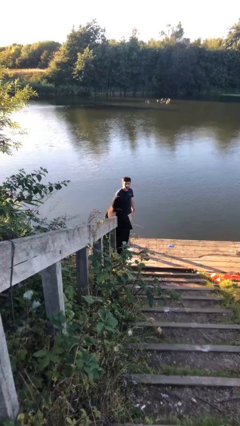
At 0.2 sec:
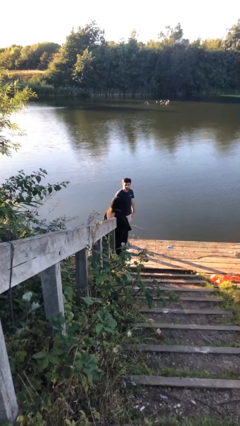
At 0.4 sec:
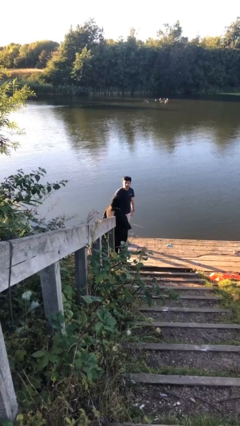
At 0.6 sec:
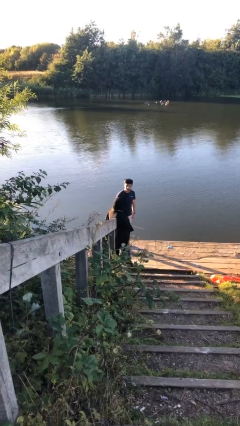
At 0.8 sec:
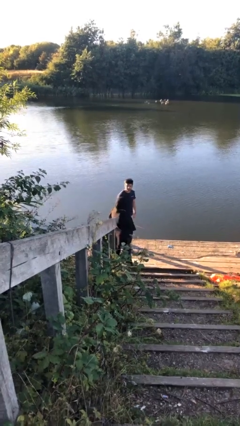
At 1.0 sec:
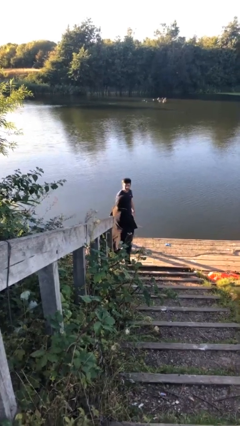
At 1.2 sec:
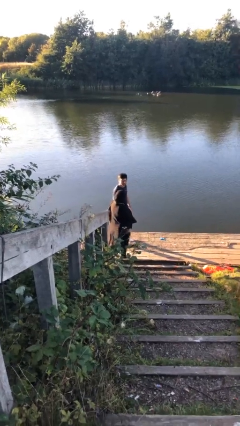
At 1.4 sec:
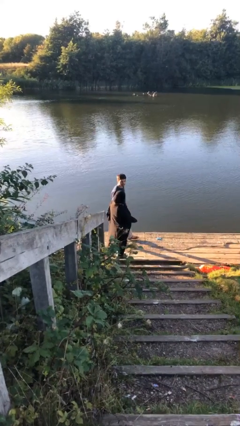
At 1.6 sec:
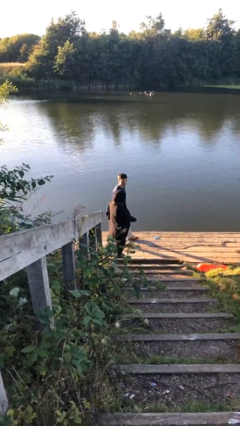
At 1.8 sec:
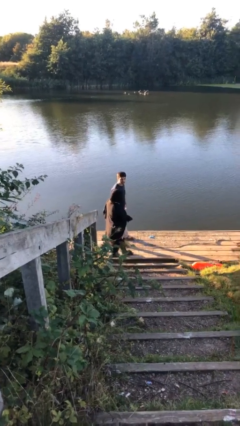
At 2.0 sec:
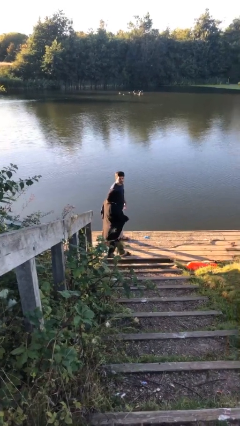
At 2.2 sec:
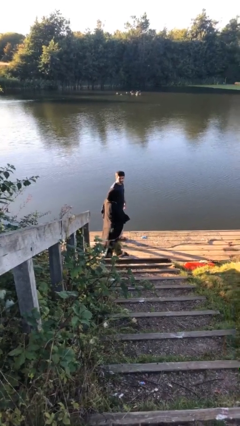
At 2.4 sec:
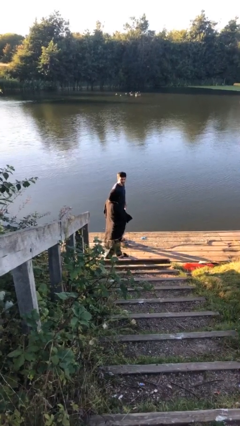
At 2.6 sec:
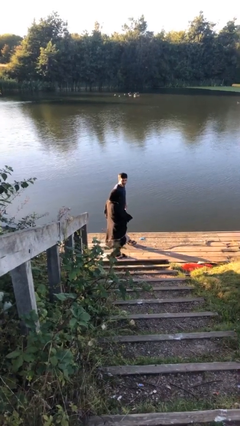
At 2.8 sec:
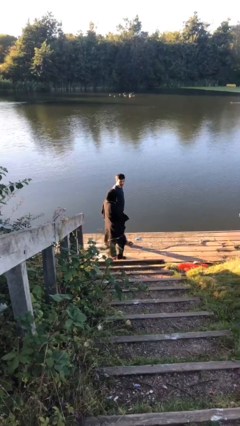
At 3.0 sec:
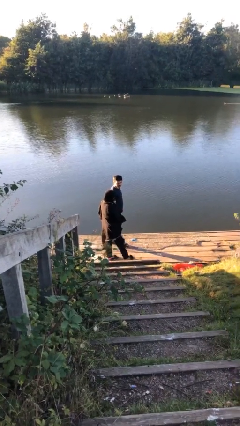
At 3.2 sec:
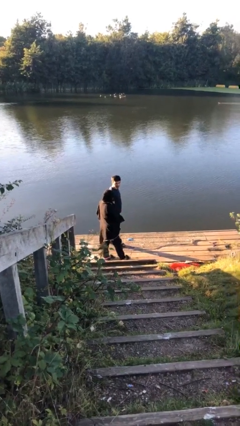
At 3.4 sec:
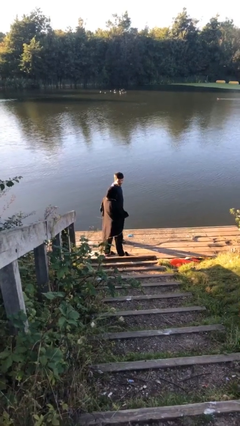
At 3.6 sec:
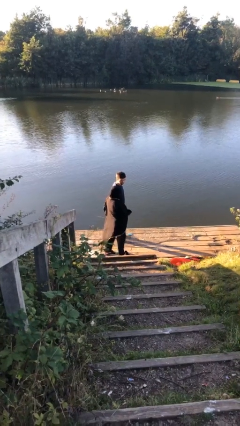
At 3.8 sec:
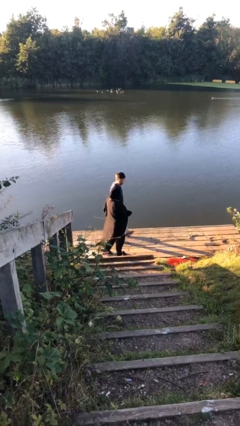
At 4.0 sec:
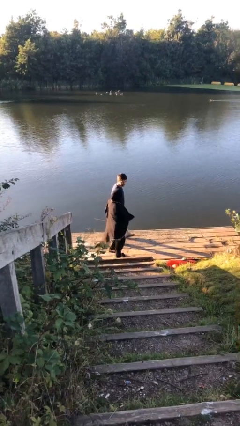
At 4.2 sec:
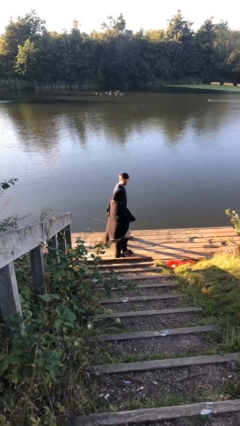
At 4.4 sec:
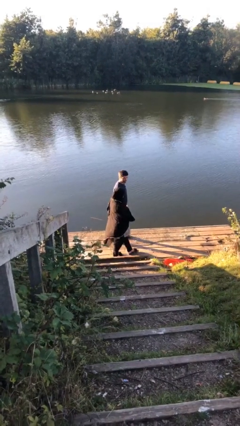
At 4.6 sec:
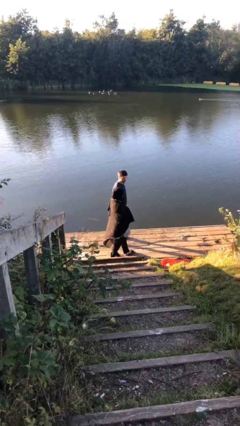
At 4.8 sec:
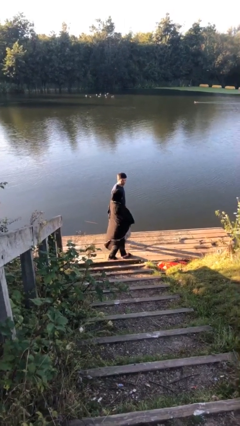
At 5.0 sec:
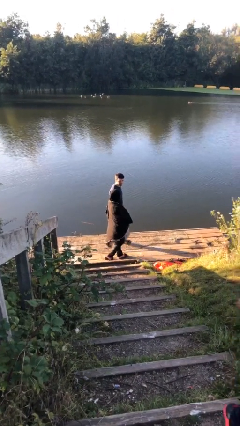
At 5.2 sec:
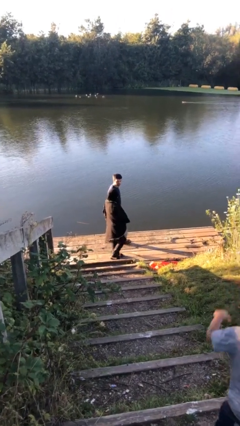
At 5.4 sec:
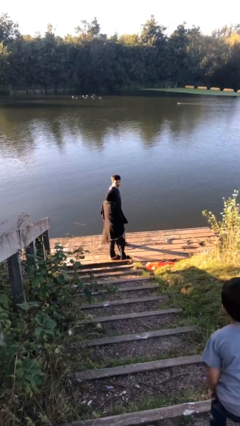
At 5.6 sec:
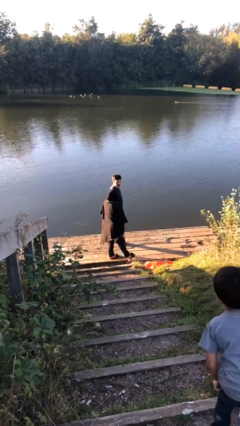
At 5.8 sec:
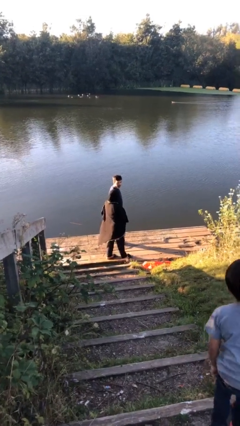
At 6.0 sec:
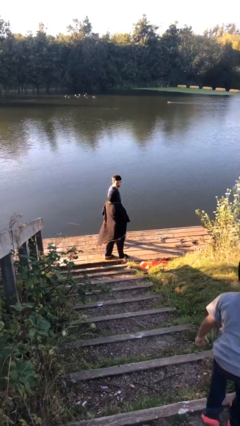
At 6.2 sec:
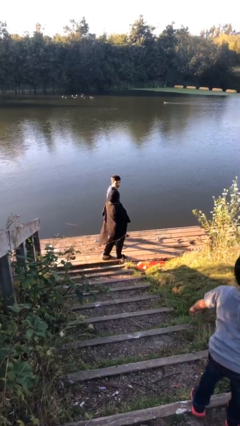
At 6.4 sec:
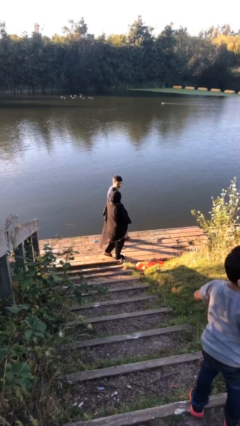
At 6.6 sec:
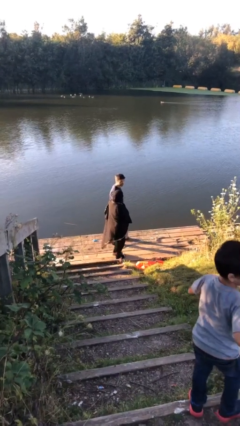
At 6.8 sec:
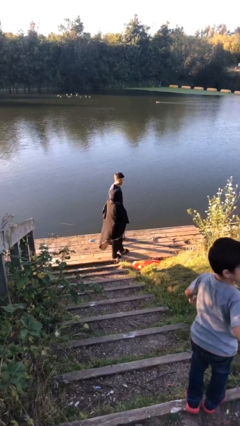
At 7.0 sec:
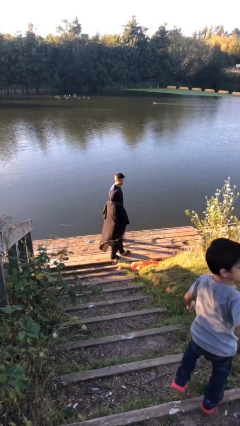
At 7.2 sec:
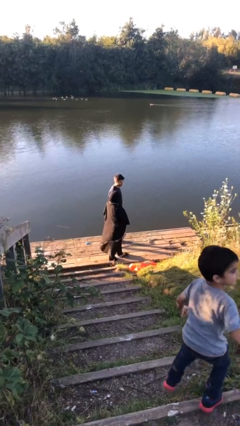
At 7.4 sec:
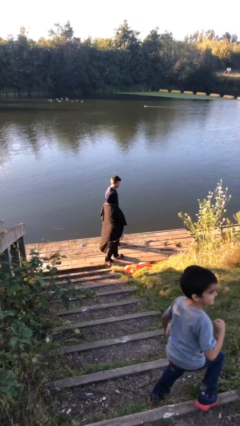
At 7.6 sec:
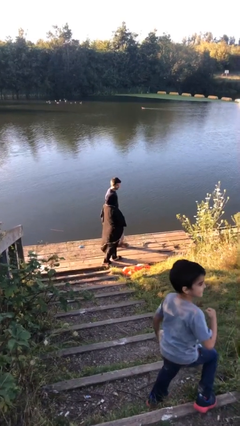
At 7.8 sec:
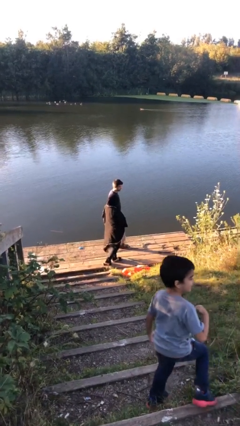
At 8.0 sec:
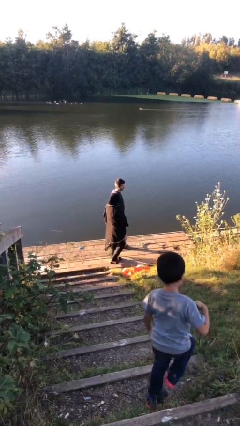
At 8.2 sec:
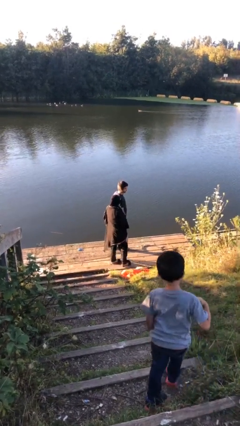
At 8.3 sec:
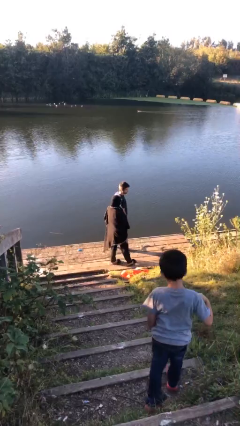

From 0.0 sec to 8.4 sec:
person talks to person

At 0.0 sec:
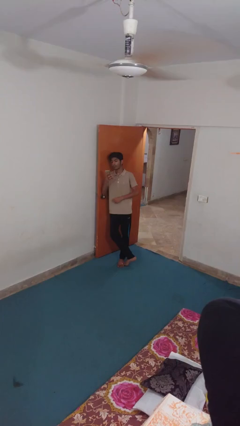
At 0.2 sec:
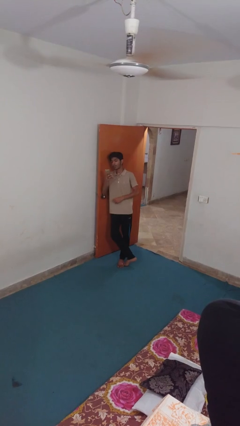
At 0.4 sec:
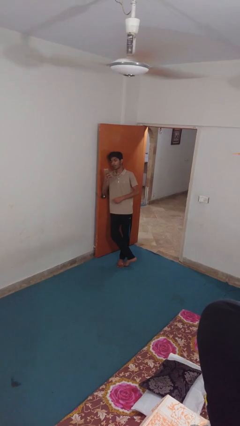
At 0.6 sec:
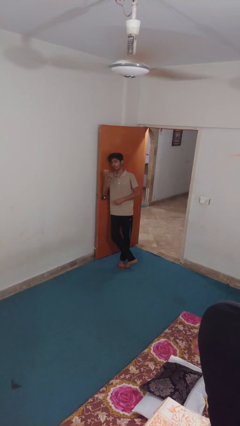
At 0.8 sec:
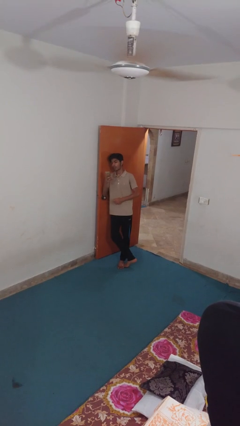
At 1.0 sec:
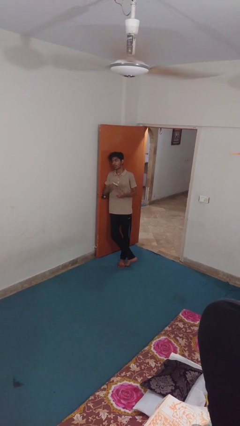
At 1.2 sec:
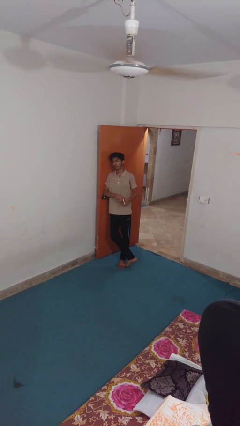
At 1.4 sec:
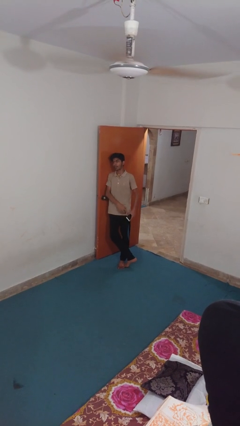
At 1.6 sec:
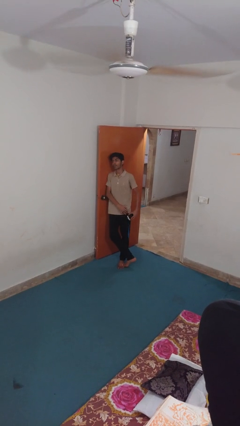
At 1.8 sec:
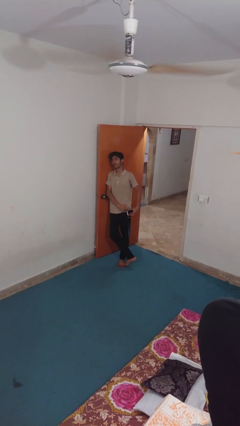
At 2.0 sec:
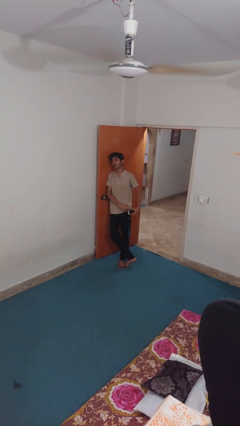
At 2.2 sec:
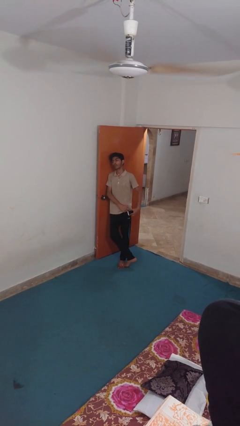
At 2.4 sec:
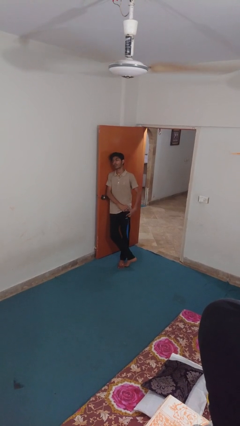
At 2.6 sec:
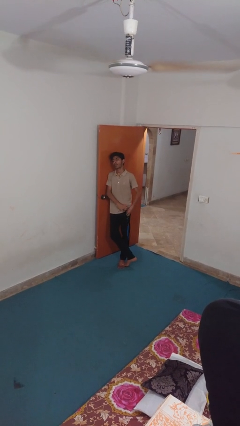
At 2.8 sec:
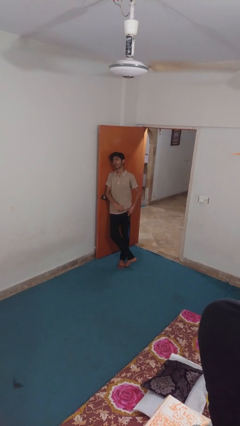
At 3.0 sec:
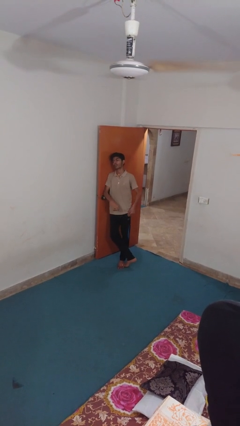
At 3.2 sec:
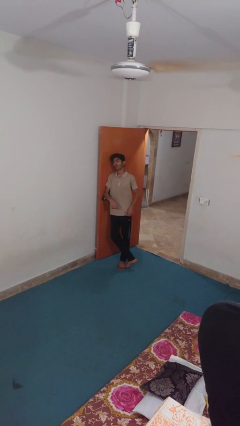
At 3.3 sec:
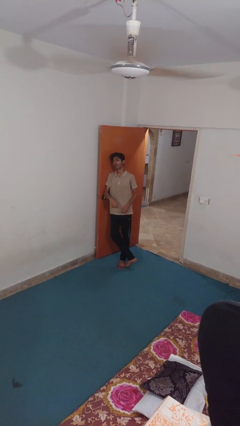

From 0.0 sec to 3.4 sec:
person puts phone into pocket

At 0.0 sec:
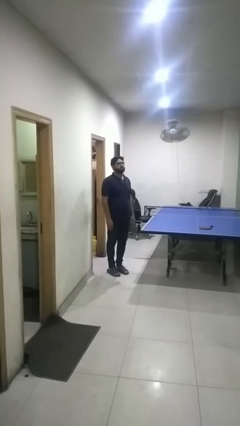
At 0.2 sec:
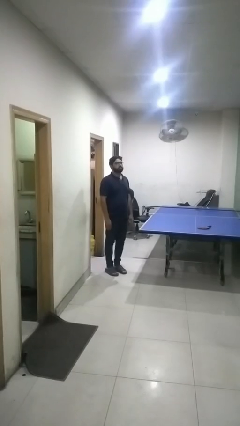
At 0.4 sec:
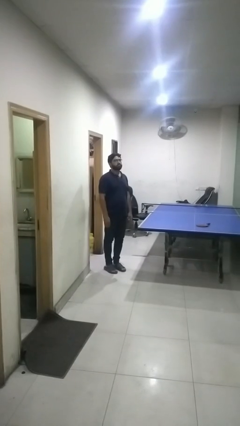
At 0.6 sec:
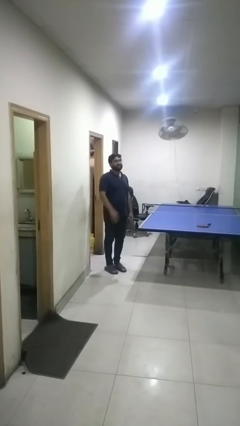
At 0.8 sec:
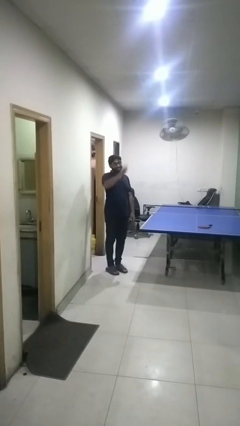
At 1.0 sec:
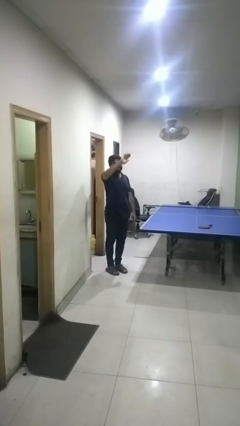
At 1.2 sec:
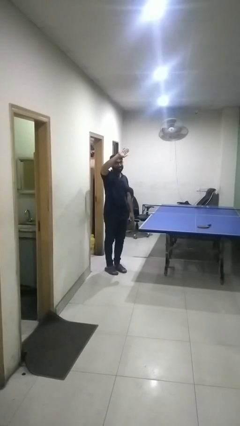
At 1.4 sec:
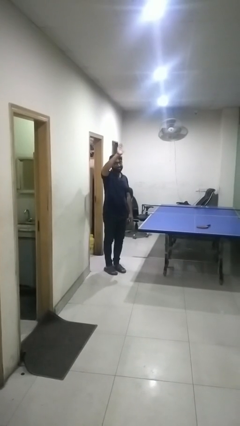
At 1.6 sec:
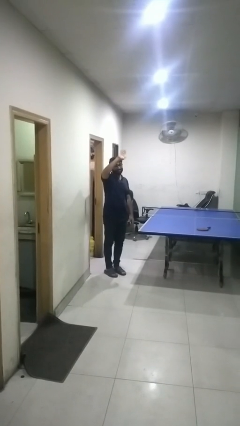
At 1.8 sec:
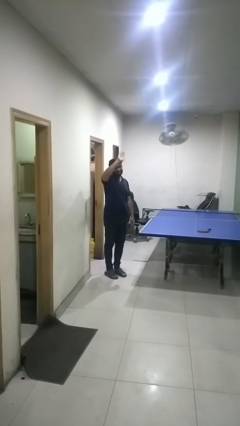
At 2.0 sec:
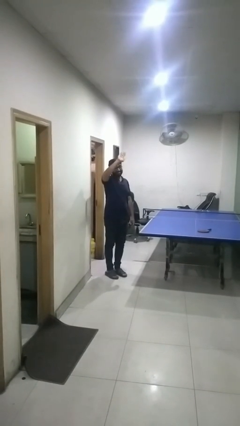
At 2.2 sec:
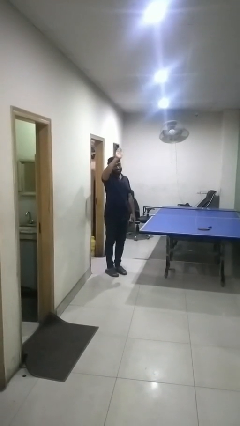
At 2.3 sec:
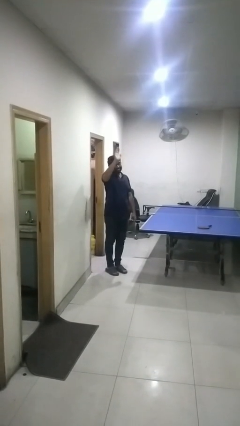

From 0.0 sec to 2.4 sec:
person waves at person

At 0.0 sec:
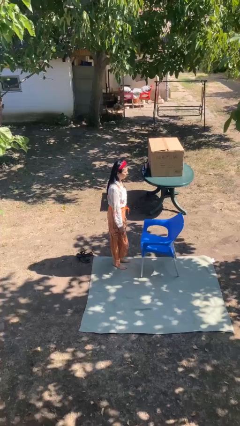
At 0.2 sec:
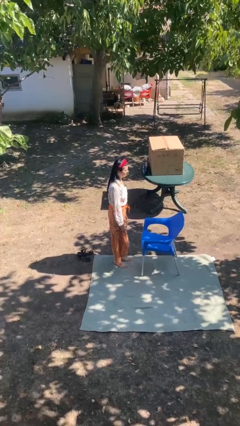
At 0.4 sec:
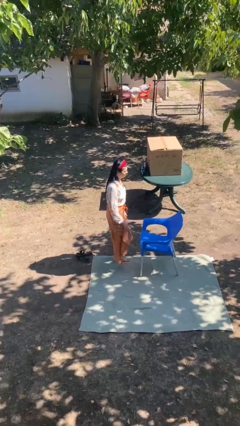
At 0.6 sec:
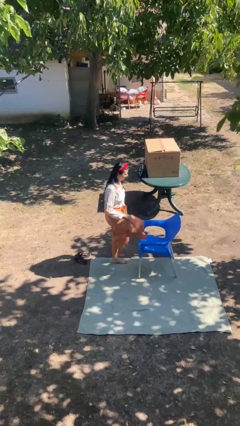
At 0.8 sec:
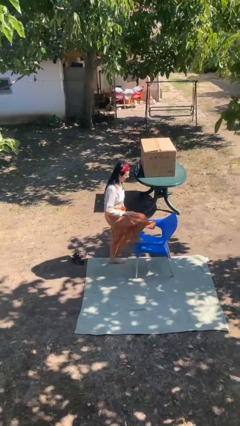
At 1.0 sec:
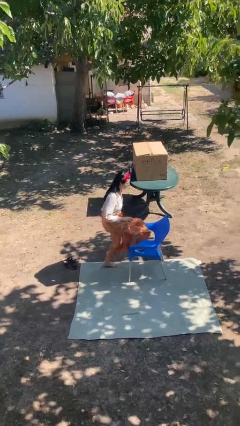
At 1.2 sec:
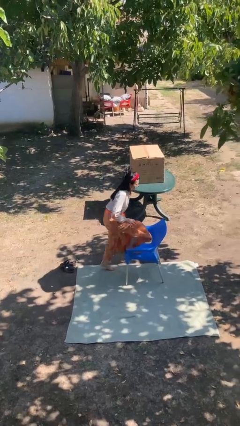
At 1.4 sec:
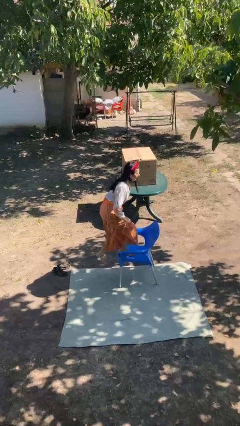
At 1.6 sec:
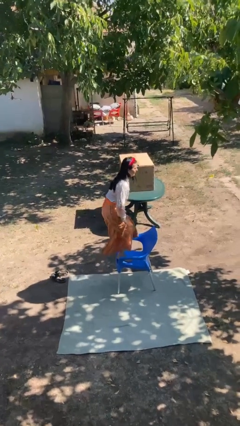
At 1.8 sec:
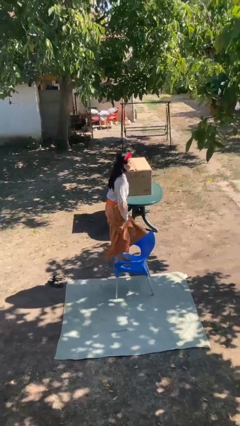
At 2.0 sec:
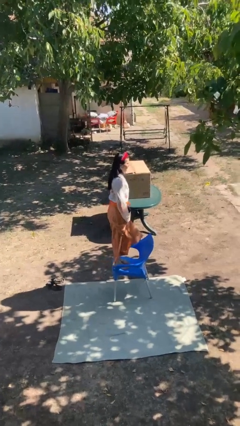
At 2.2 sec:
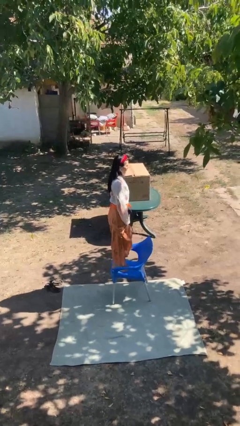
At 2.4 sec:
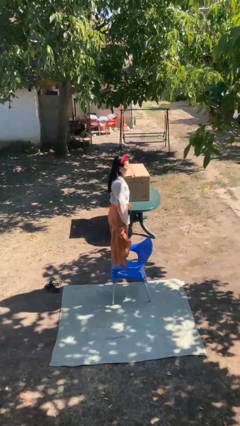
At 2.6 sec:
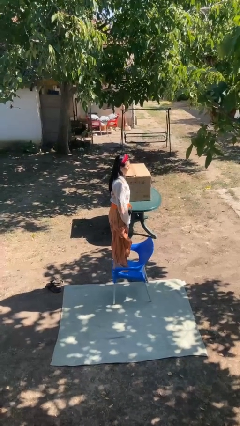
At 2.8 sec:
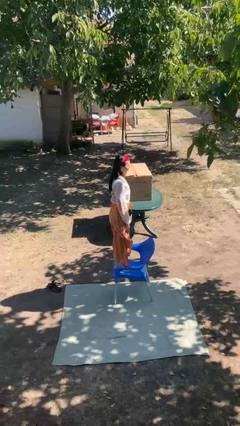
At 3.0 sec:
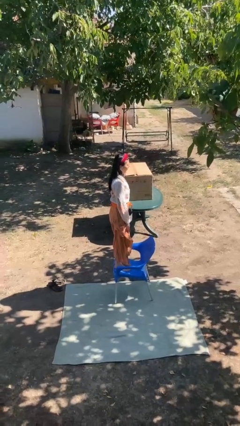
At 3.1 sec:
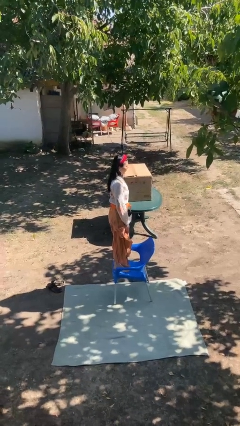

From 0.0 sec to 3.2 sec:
person climbs on chair

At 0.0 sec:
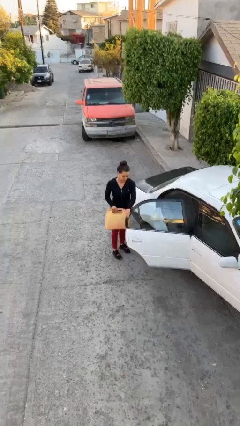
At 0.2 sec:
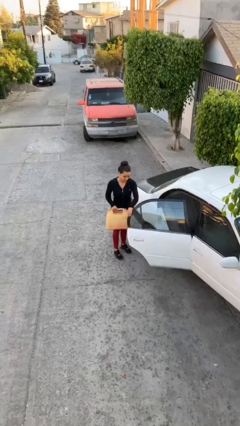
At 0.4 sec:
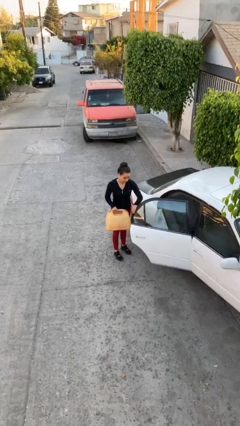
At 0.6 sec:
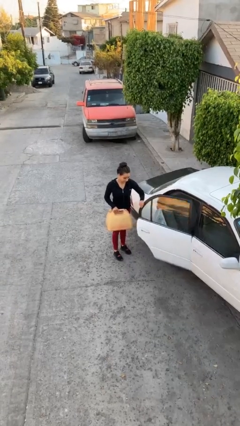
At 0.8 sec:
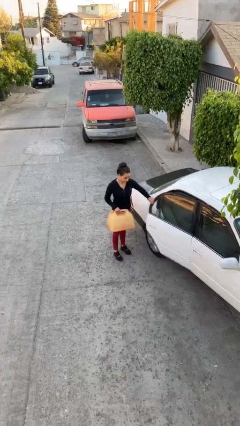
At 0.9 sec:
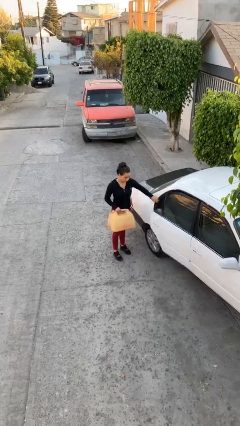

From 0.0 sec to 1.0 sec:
person closes car door
